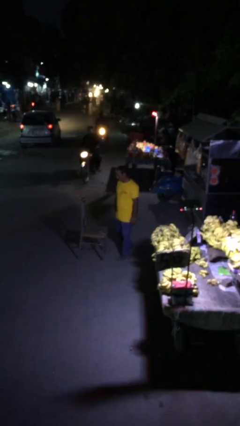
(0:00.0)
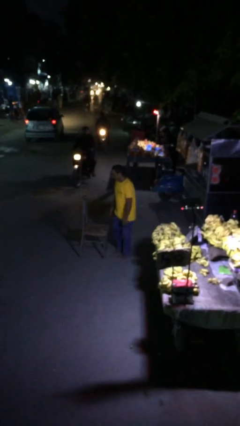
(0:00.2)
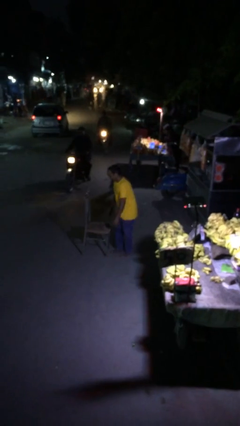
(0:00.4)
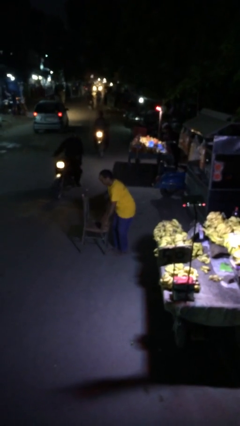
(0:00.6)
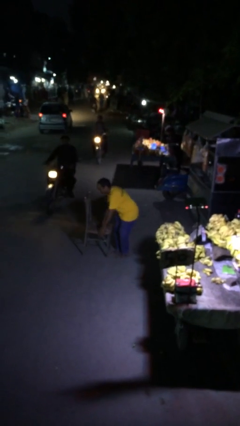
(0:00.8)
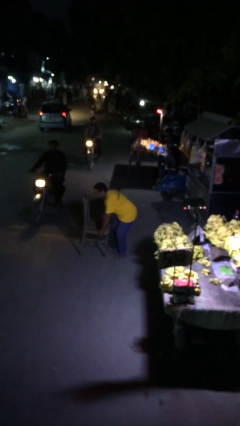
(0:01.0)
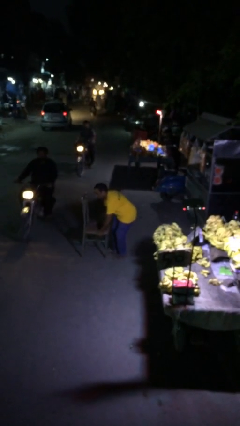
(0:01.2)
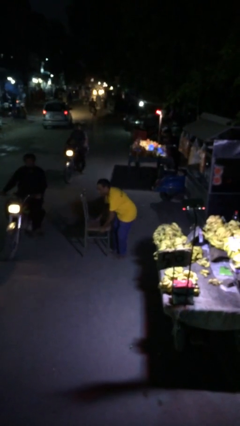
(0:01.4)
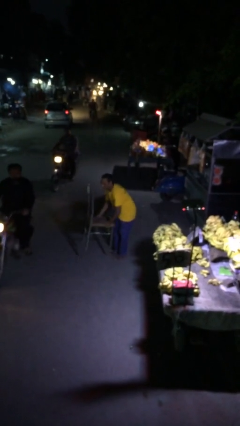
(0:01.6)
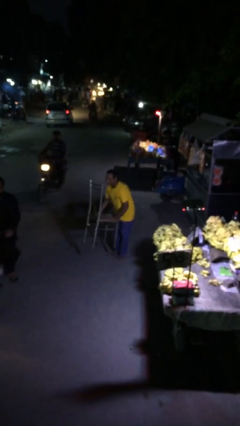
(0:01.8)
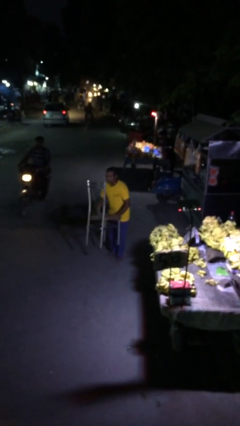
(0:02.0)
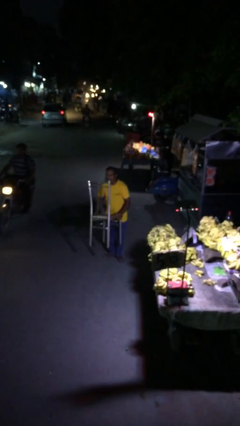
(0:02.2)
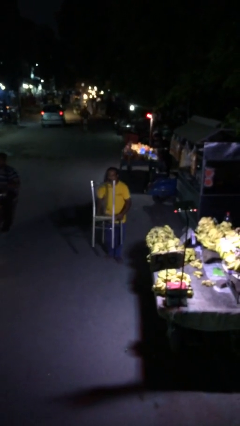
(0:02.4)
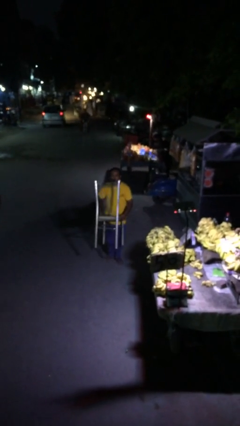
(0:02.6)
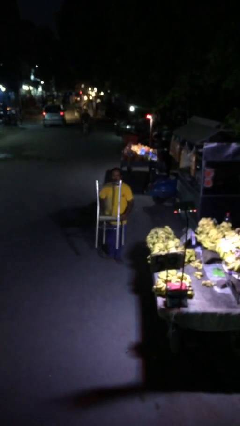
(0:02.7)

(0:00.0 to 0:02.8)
person picks up object from floor

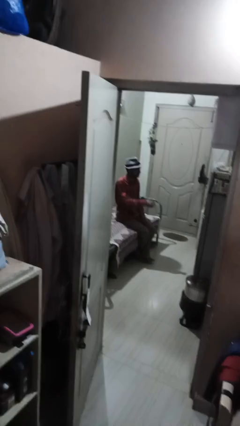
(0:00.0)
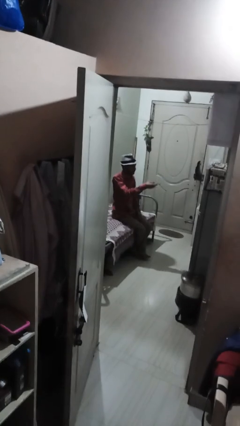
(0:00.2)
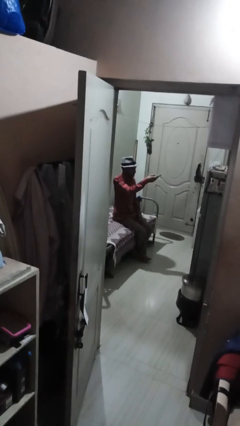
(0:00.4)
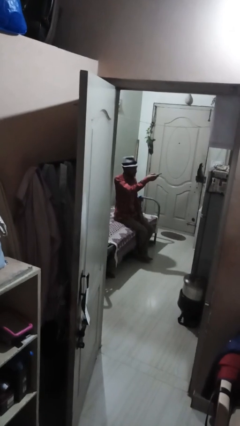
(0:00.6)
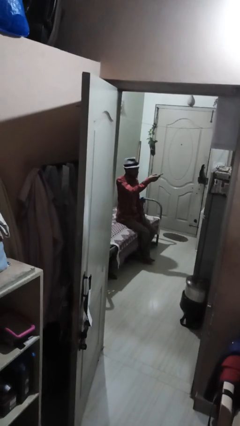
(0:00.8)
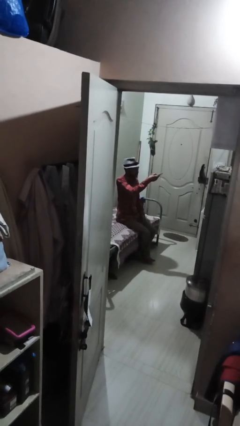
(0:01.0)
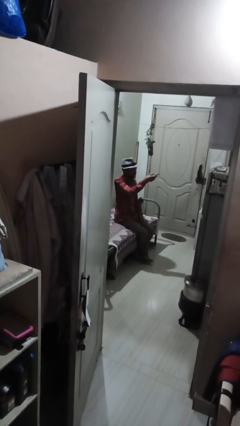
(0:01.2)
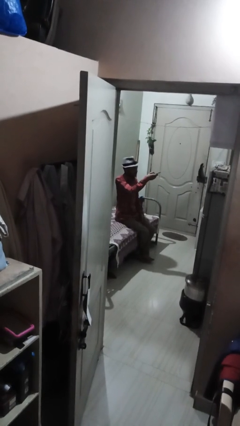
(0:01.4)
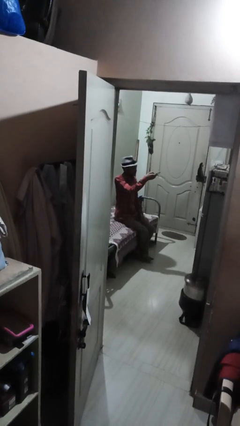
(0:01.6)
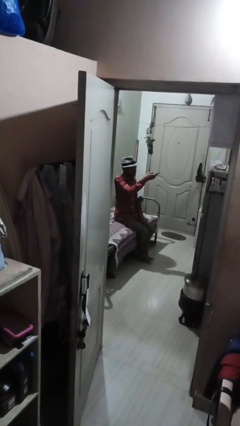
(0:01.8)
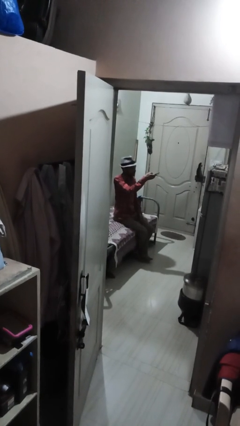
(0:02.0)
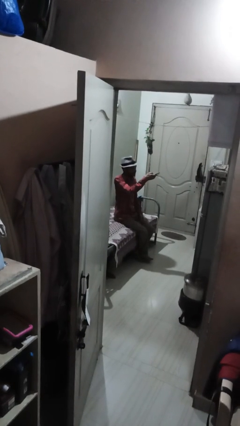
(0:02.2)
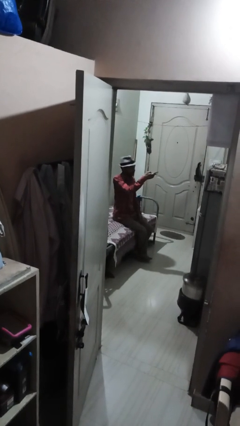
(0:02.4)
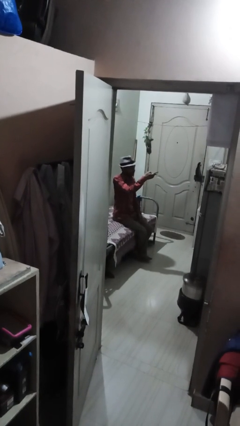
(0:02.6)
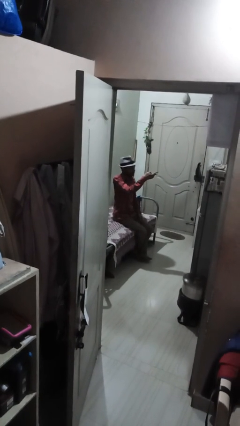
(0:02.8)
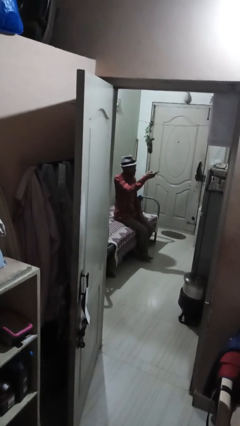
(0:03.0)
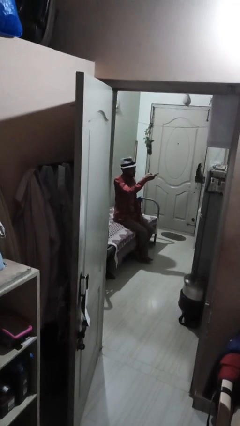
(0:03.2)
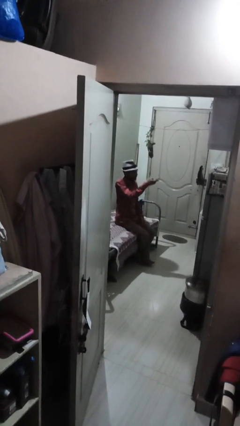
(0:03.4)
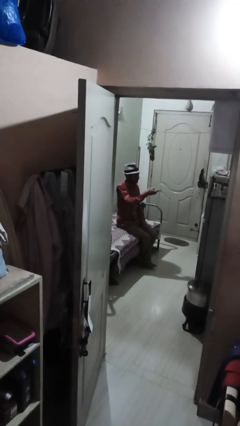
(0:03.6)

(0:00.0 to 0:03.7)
person uses television remote

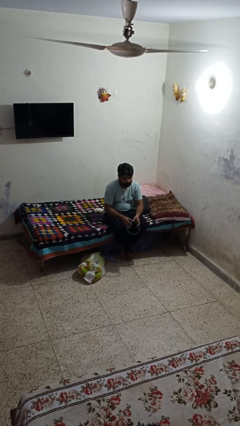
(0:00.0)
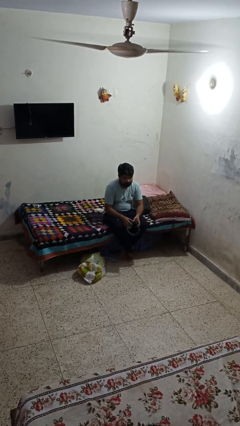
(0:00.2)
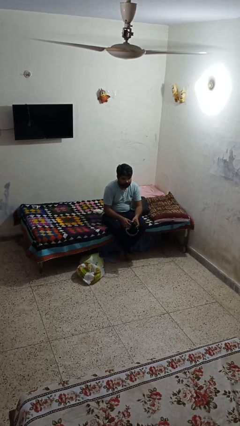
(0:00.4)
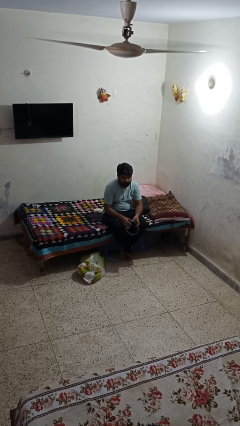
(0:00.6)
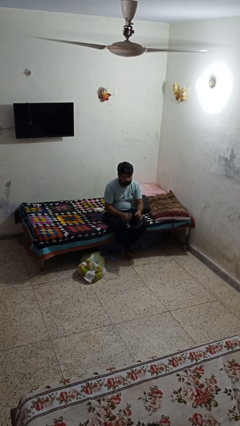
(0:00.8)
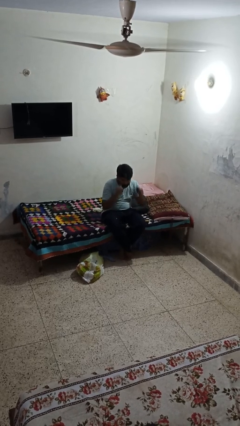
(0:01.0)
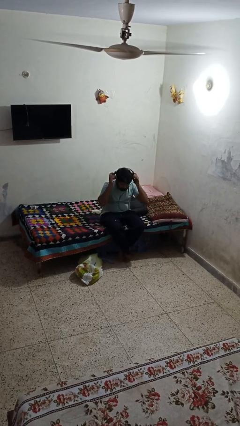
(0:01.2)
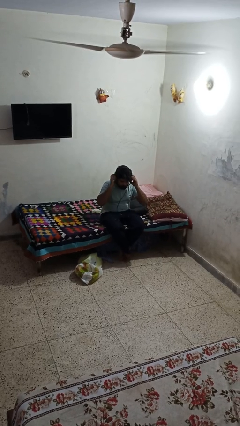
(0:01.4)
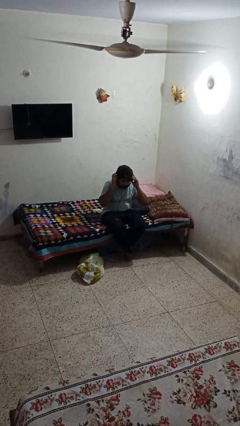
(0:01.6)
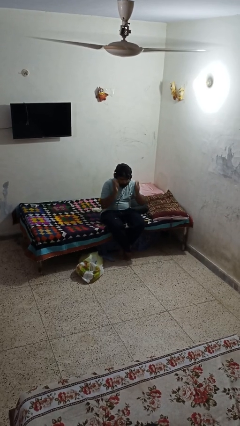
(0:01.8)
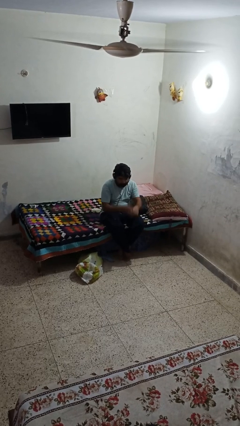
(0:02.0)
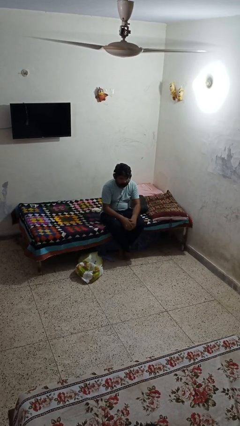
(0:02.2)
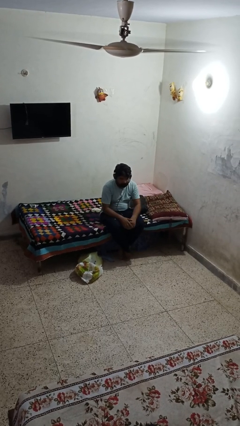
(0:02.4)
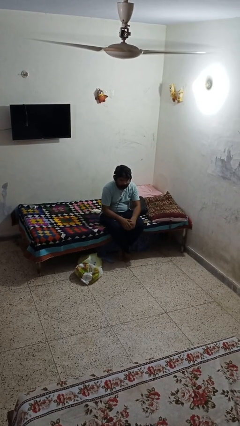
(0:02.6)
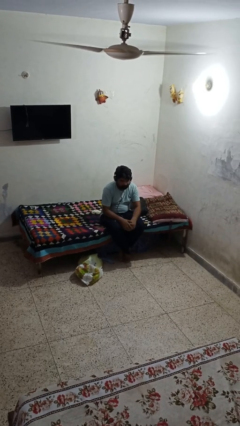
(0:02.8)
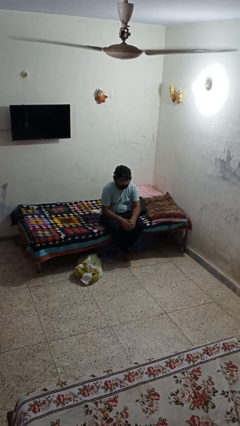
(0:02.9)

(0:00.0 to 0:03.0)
person puts on headphones

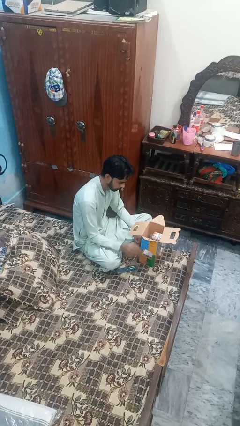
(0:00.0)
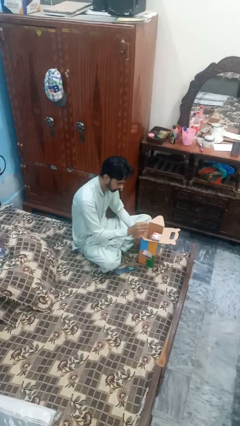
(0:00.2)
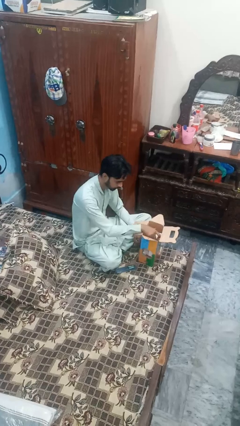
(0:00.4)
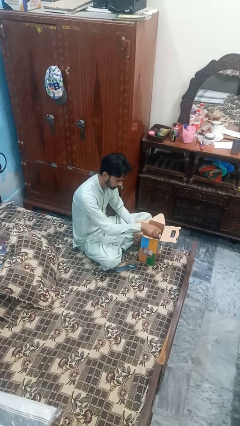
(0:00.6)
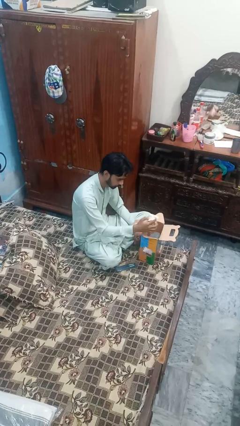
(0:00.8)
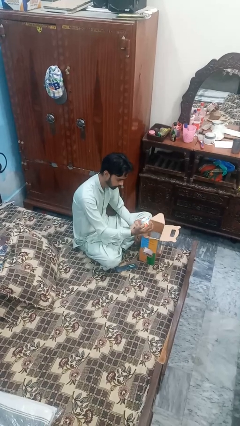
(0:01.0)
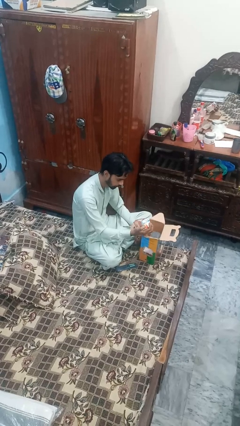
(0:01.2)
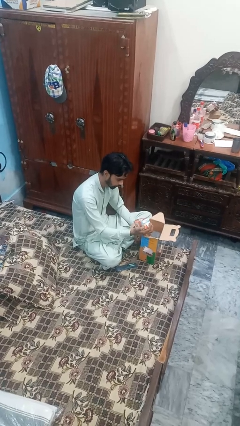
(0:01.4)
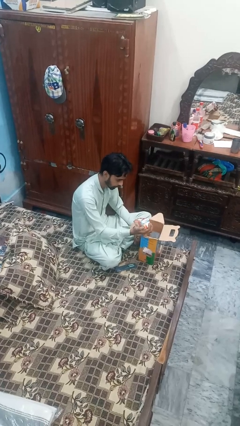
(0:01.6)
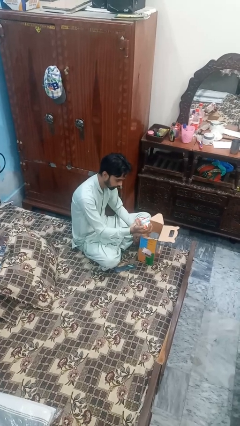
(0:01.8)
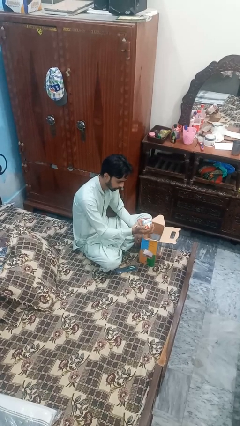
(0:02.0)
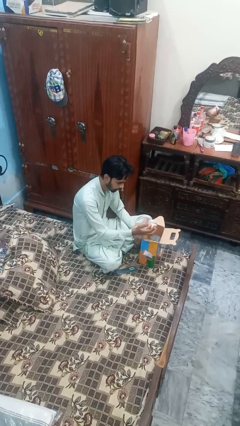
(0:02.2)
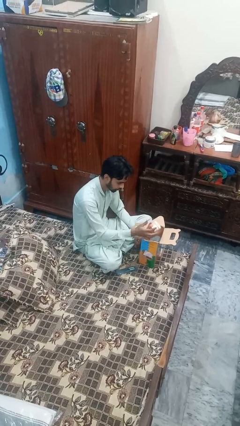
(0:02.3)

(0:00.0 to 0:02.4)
person takes object from box

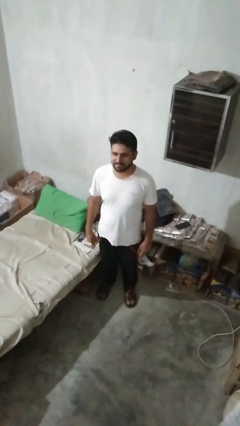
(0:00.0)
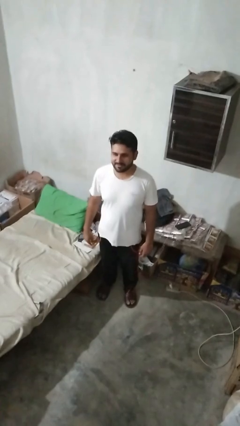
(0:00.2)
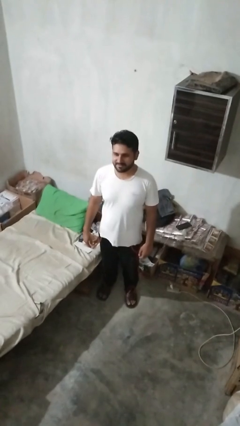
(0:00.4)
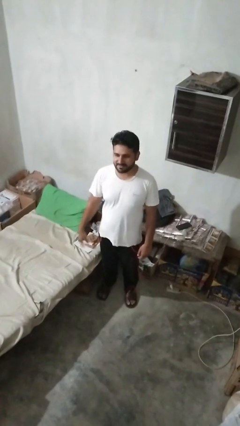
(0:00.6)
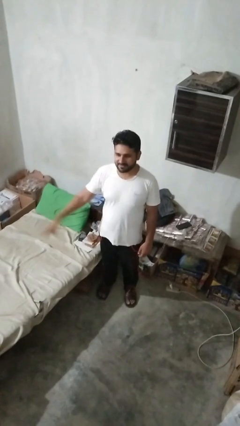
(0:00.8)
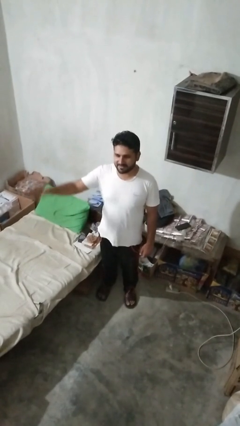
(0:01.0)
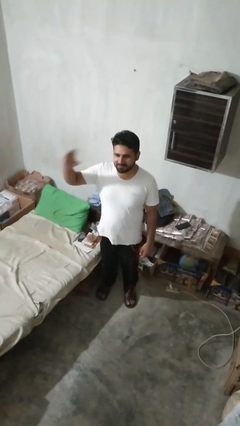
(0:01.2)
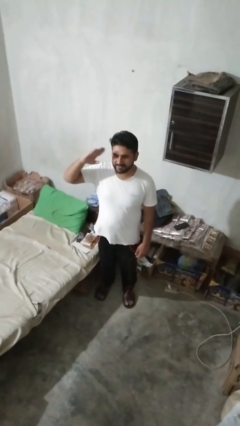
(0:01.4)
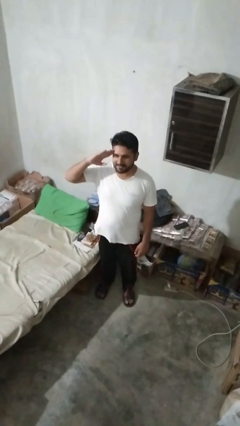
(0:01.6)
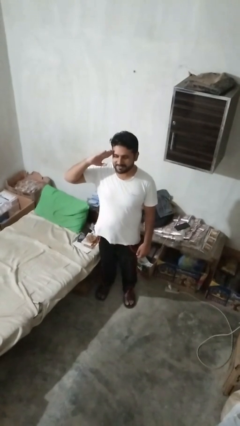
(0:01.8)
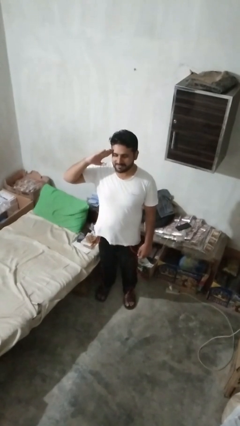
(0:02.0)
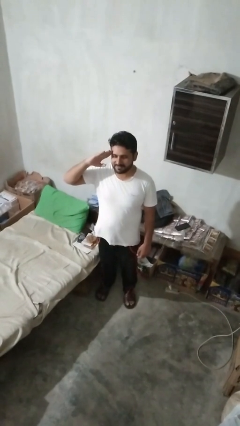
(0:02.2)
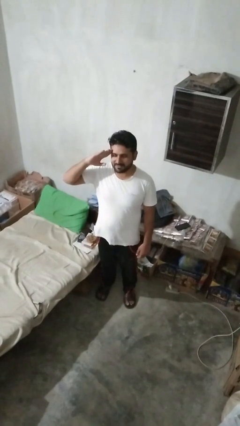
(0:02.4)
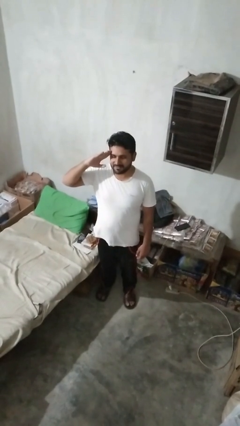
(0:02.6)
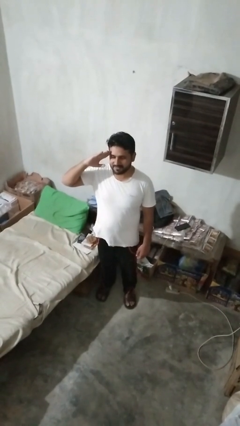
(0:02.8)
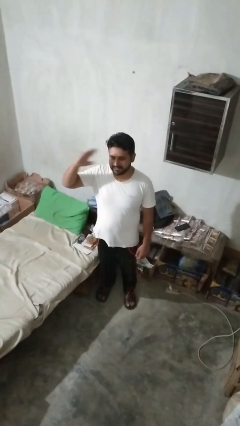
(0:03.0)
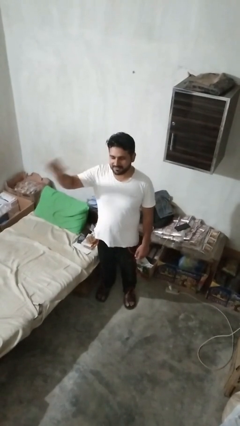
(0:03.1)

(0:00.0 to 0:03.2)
person salutes

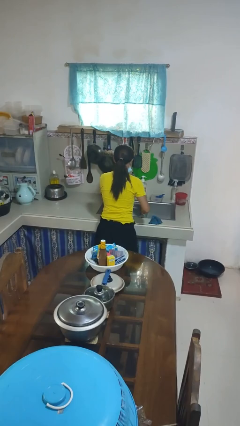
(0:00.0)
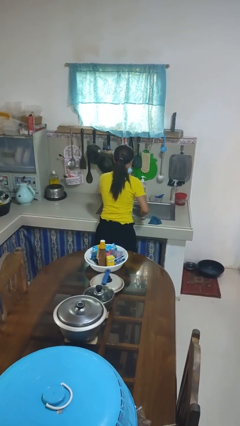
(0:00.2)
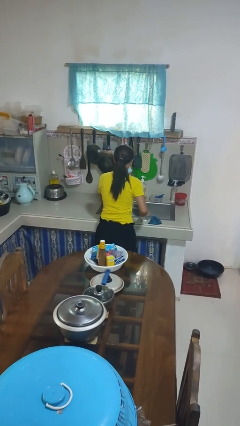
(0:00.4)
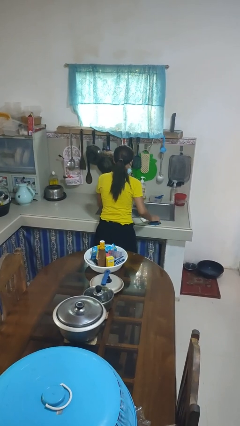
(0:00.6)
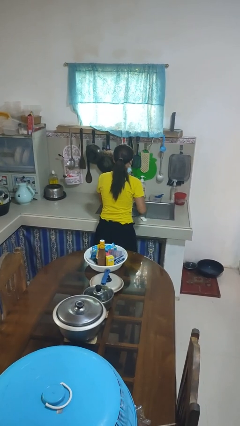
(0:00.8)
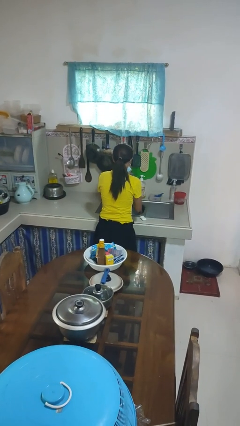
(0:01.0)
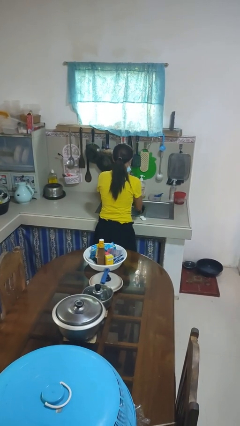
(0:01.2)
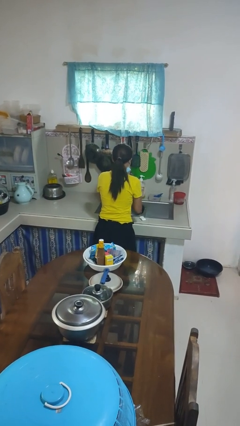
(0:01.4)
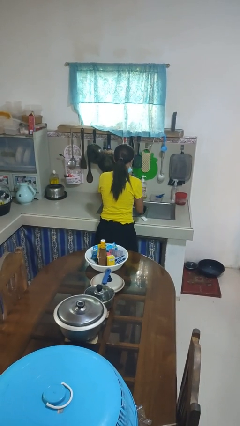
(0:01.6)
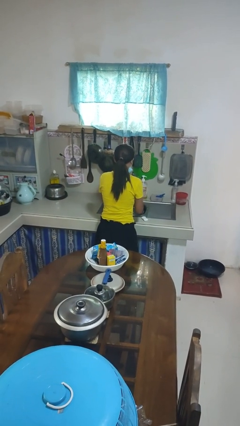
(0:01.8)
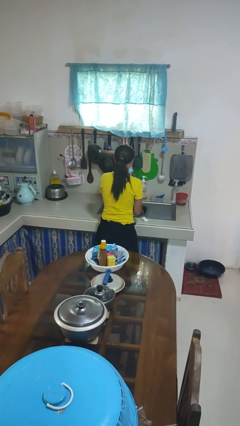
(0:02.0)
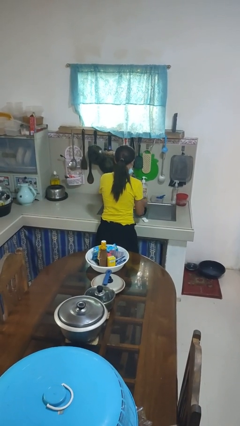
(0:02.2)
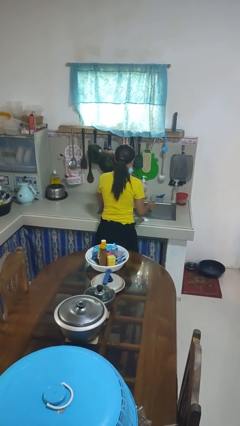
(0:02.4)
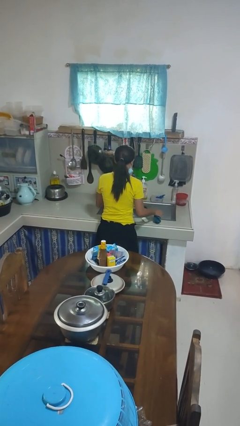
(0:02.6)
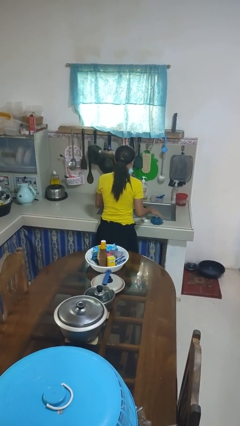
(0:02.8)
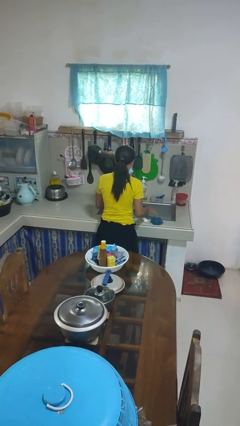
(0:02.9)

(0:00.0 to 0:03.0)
person dries hands with towel
